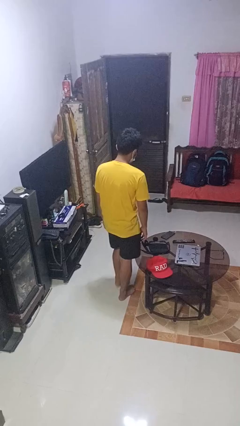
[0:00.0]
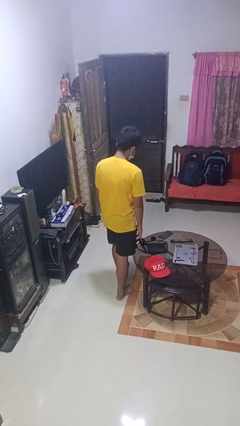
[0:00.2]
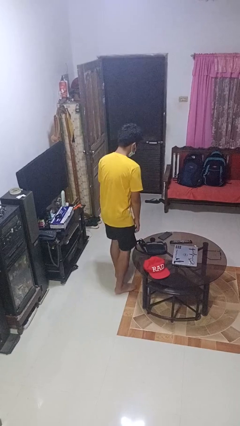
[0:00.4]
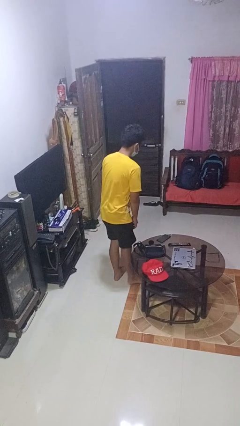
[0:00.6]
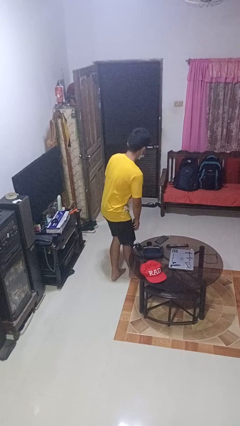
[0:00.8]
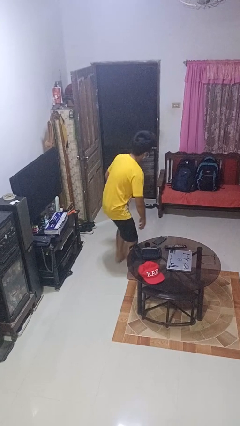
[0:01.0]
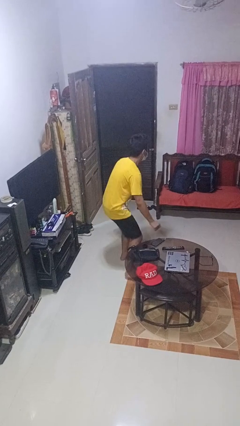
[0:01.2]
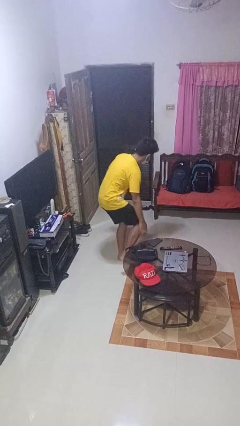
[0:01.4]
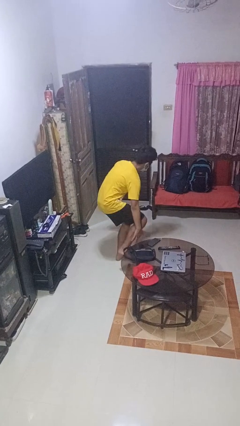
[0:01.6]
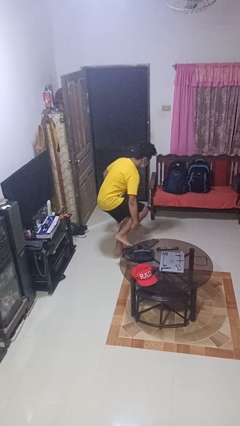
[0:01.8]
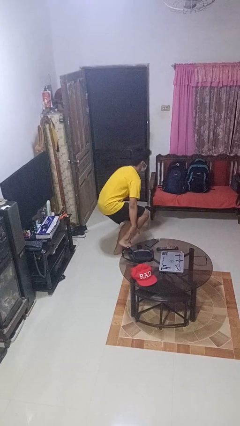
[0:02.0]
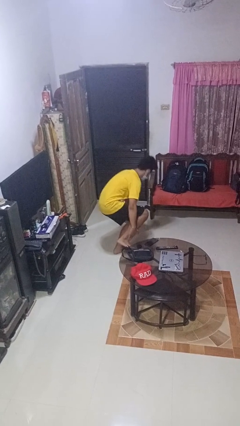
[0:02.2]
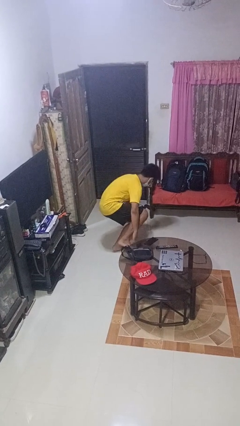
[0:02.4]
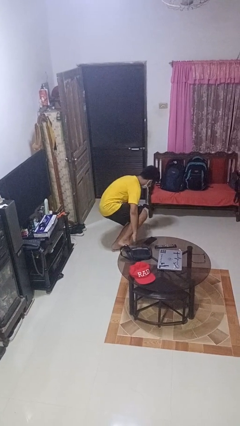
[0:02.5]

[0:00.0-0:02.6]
person trips on object on floor

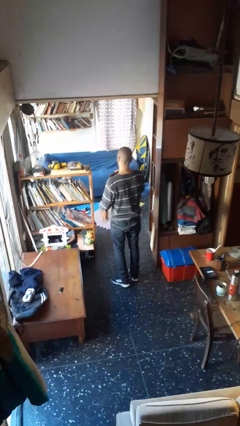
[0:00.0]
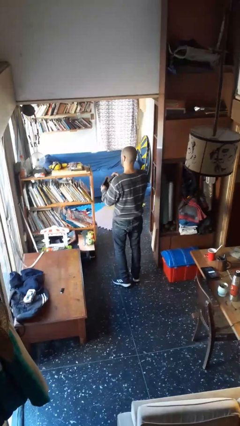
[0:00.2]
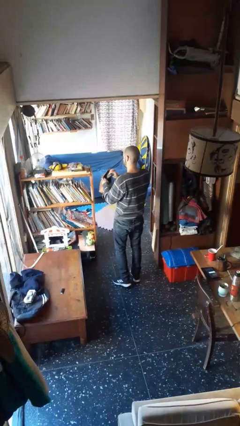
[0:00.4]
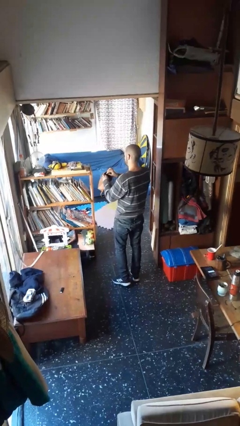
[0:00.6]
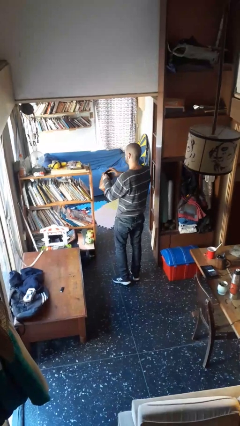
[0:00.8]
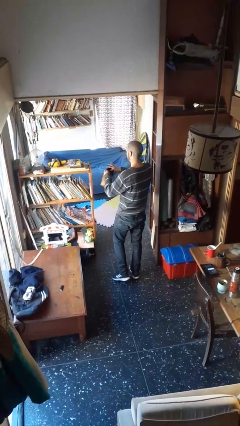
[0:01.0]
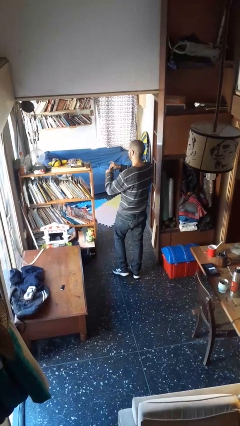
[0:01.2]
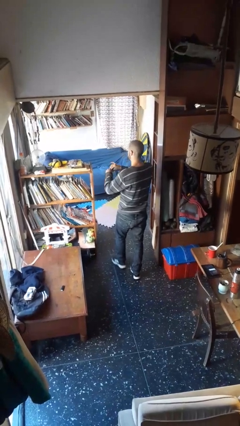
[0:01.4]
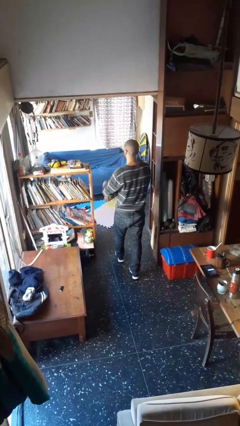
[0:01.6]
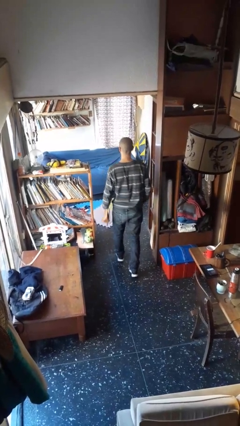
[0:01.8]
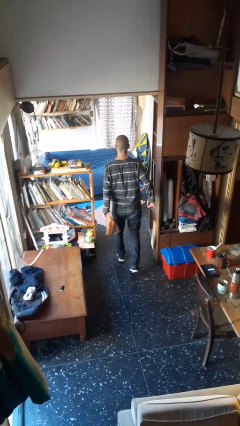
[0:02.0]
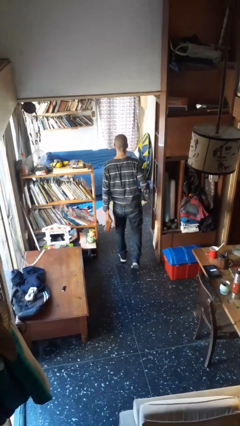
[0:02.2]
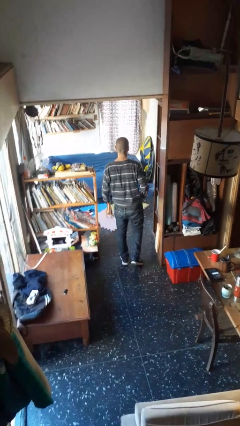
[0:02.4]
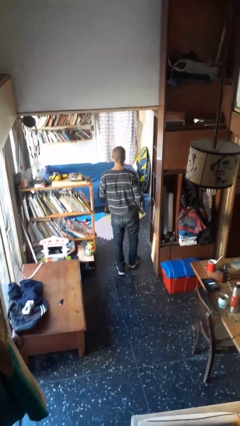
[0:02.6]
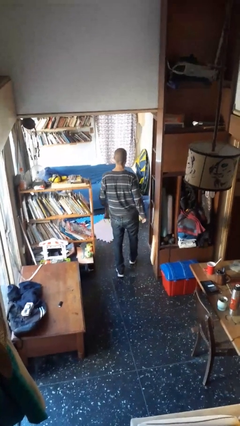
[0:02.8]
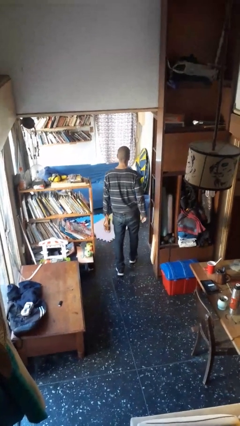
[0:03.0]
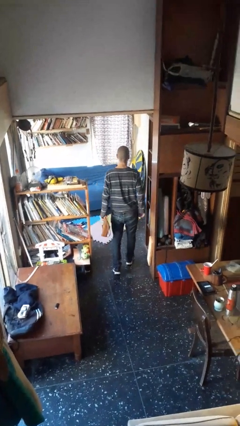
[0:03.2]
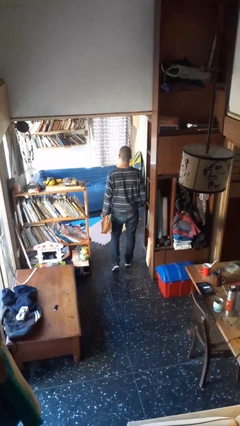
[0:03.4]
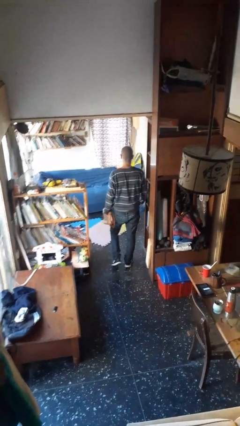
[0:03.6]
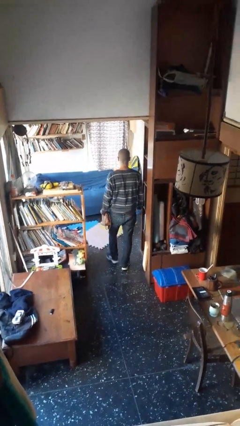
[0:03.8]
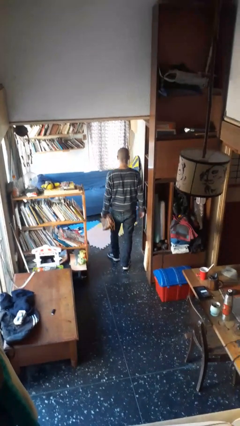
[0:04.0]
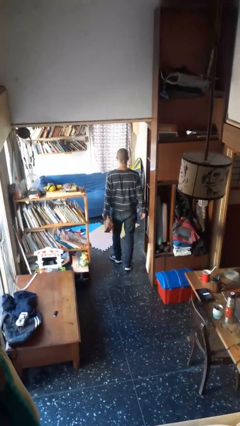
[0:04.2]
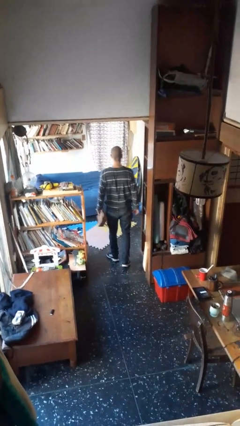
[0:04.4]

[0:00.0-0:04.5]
person puts object into purse

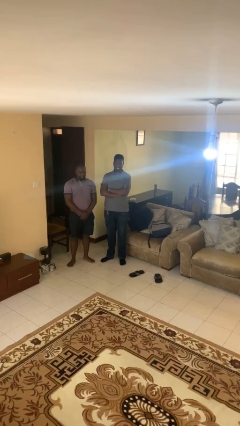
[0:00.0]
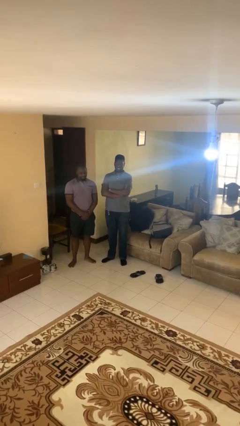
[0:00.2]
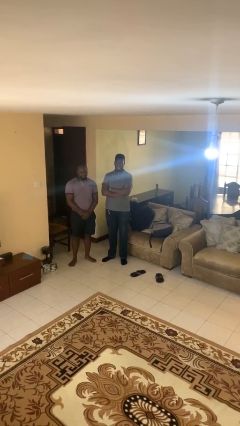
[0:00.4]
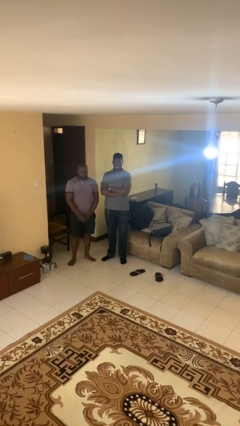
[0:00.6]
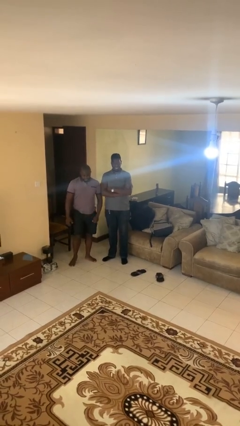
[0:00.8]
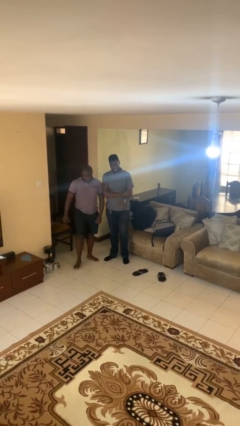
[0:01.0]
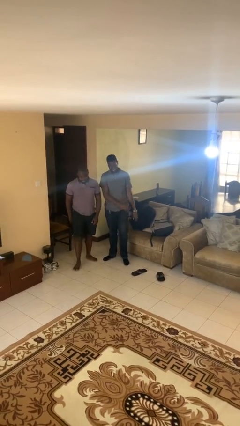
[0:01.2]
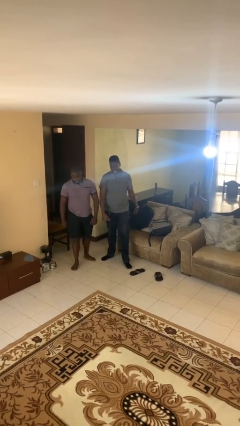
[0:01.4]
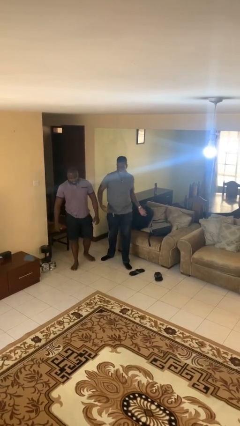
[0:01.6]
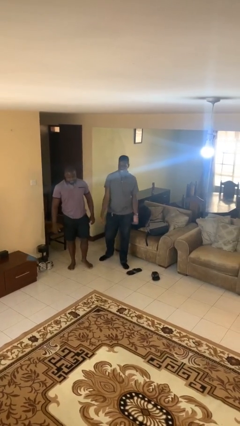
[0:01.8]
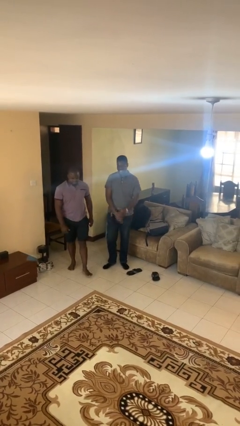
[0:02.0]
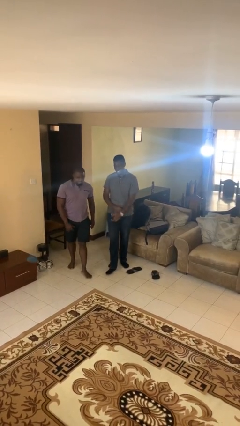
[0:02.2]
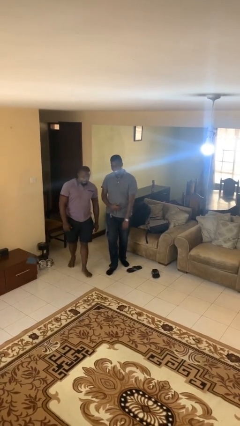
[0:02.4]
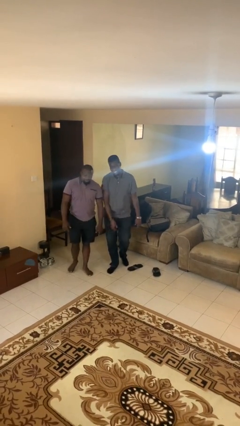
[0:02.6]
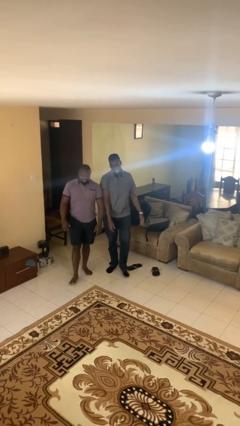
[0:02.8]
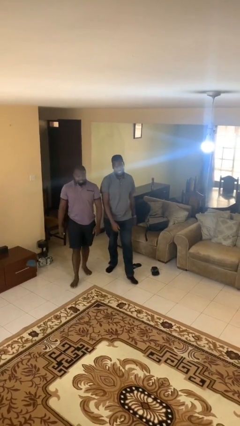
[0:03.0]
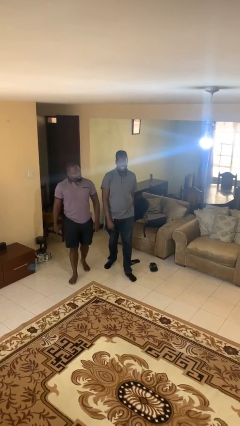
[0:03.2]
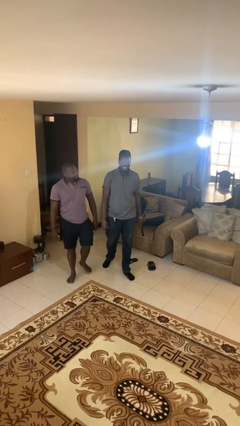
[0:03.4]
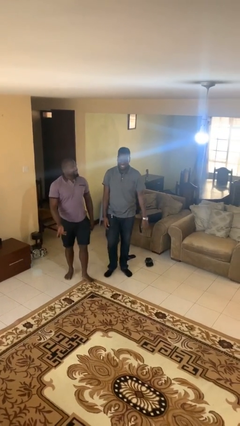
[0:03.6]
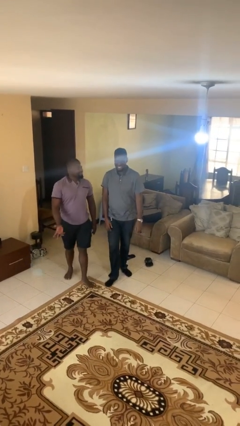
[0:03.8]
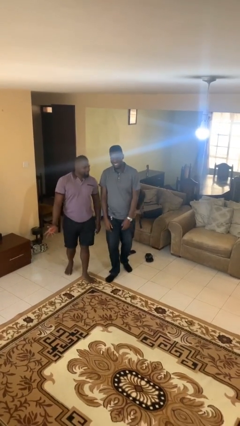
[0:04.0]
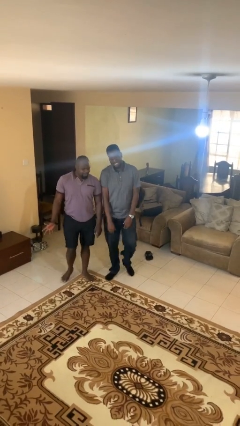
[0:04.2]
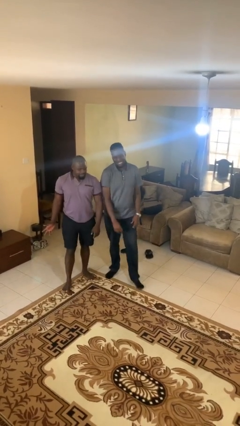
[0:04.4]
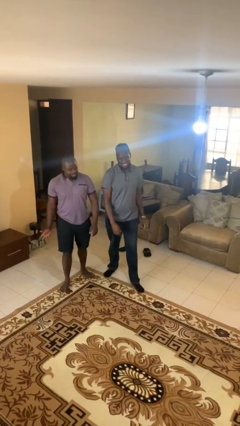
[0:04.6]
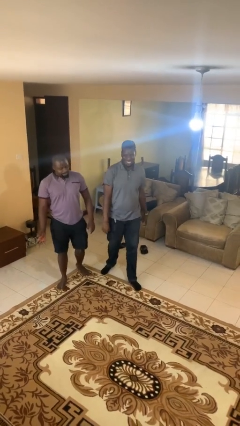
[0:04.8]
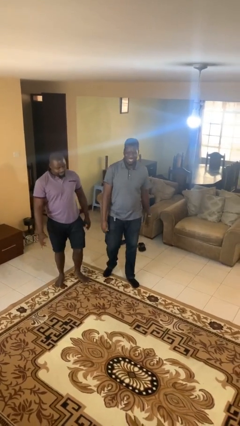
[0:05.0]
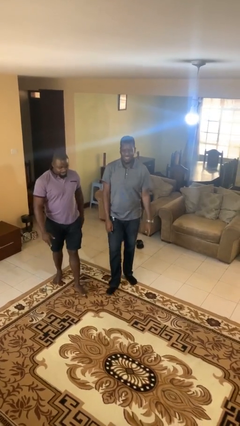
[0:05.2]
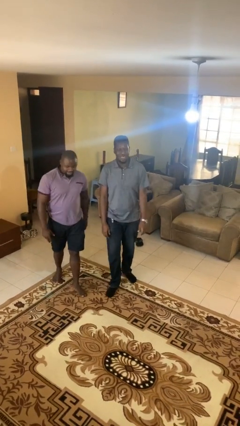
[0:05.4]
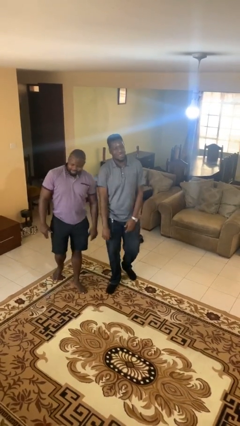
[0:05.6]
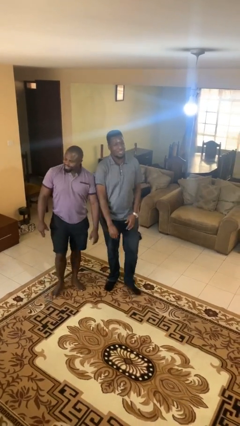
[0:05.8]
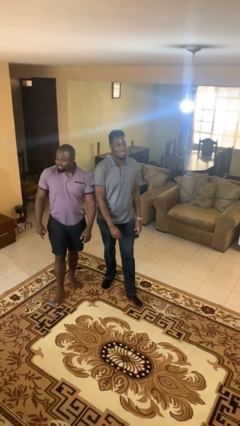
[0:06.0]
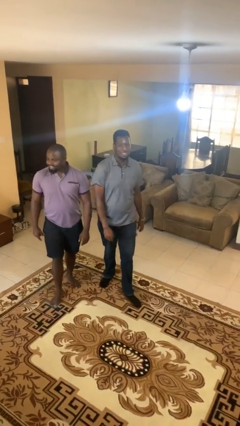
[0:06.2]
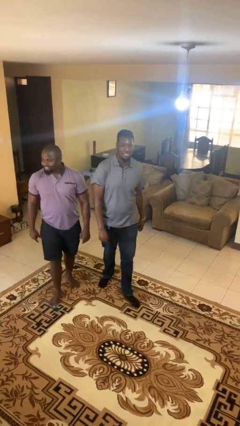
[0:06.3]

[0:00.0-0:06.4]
person talks to person

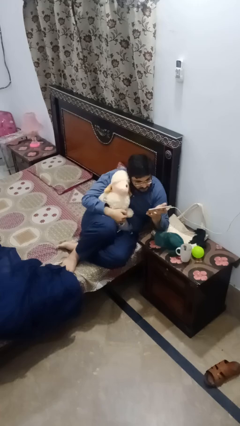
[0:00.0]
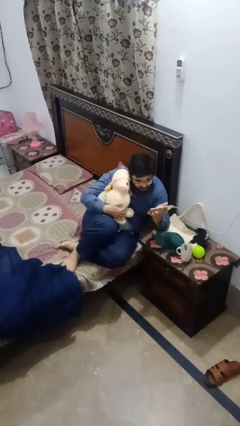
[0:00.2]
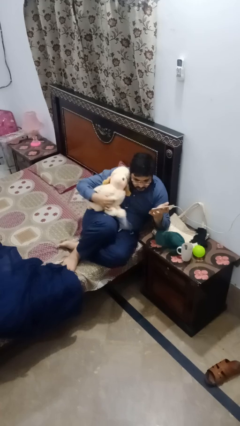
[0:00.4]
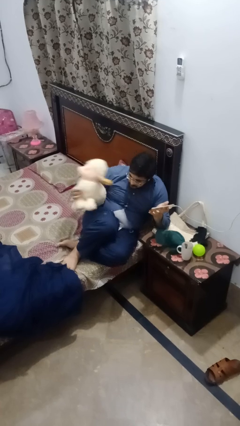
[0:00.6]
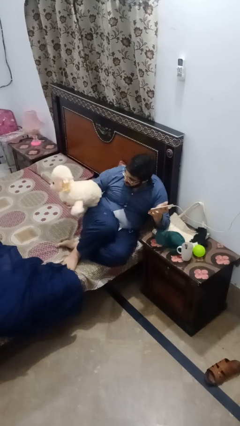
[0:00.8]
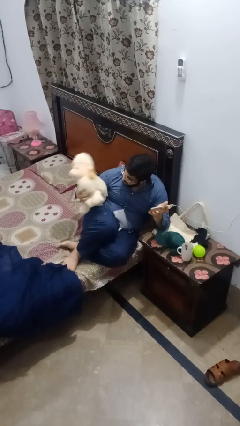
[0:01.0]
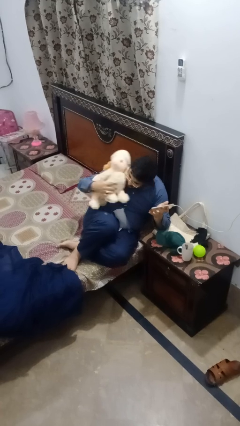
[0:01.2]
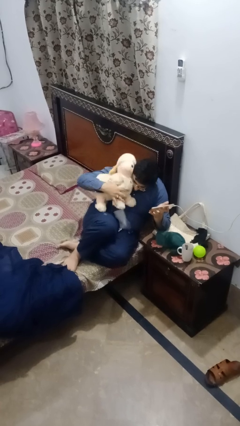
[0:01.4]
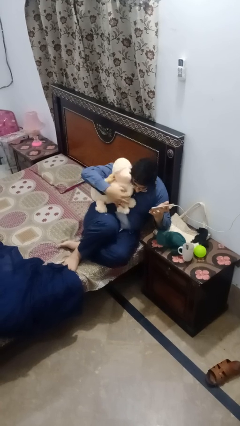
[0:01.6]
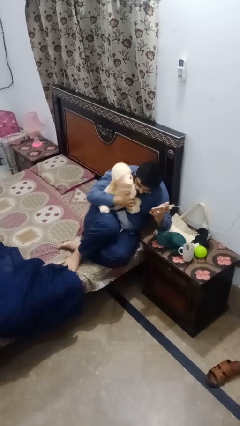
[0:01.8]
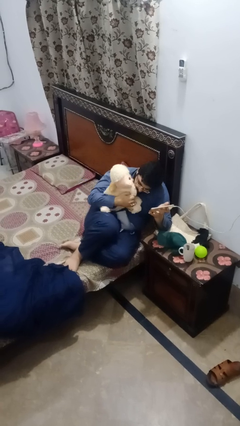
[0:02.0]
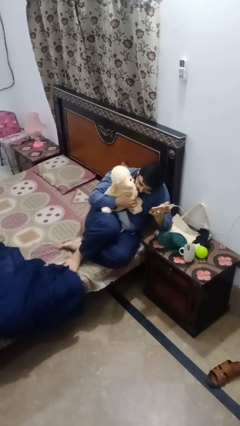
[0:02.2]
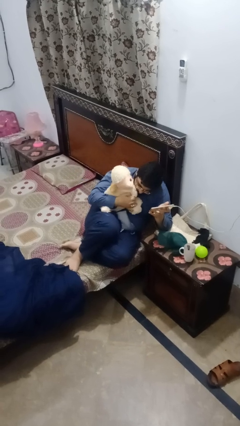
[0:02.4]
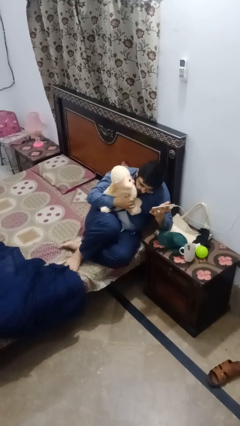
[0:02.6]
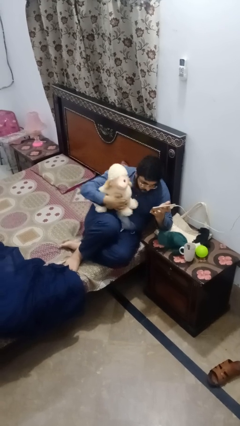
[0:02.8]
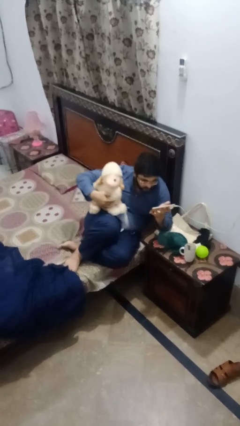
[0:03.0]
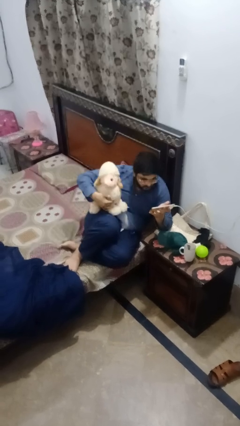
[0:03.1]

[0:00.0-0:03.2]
person hugs stuffed animal

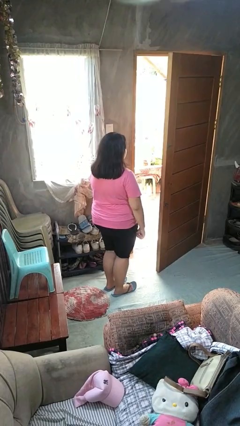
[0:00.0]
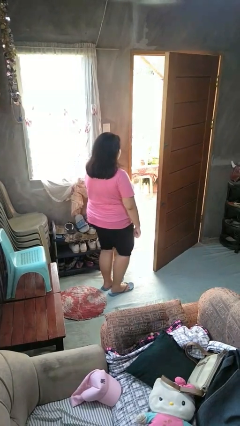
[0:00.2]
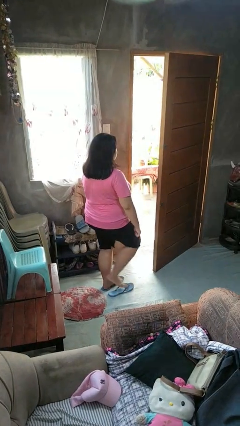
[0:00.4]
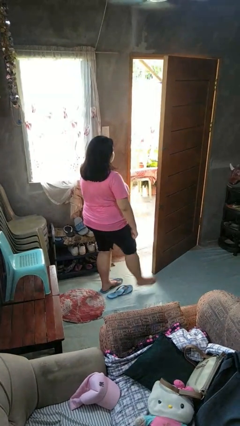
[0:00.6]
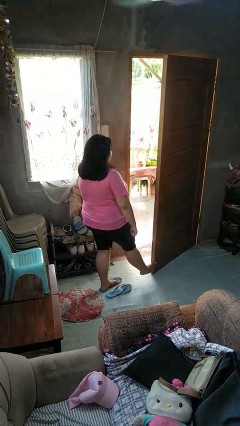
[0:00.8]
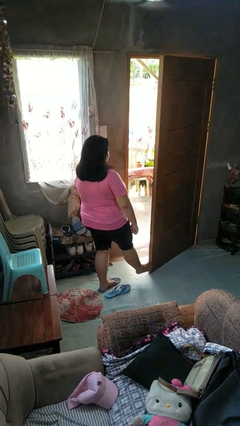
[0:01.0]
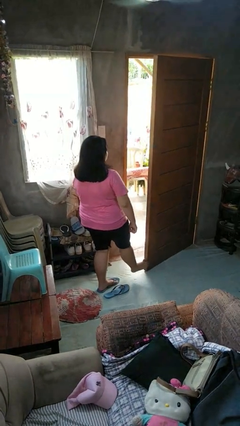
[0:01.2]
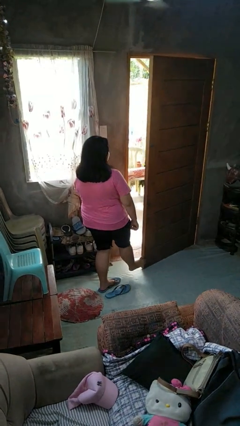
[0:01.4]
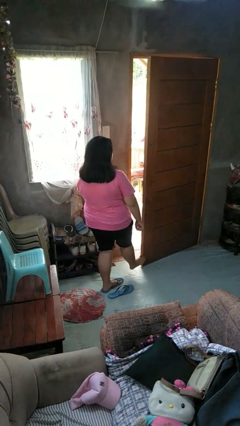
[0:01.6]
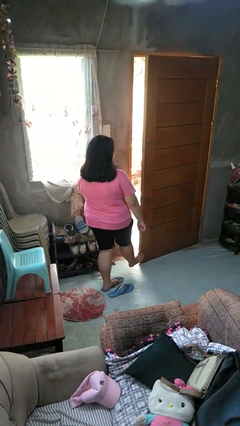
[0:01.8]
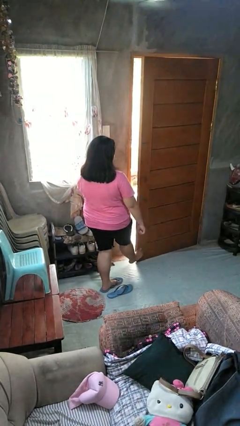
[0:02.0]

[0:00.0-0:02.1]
person closes door with foot
